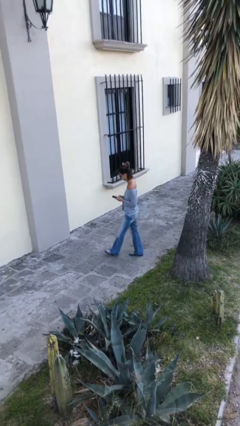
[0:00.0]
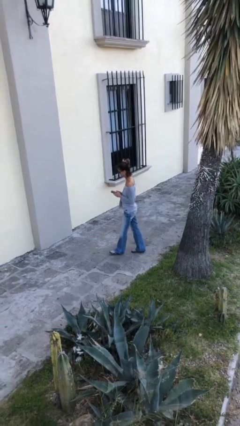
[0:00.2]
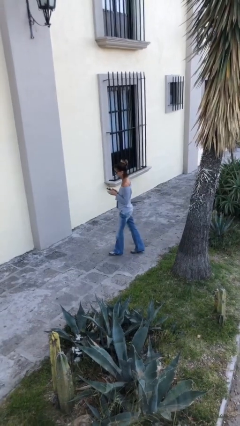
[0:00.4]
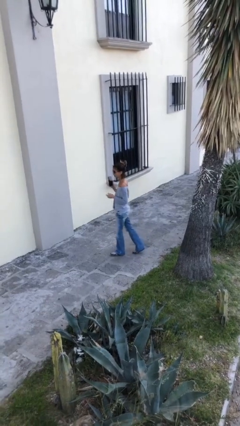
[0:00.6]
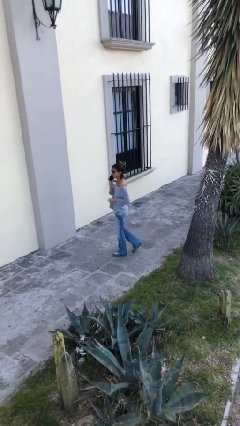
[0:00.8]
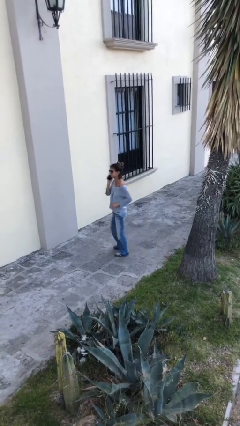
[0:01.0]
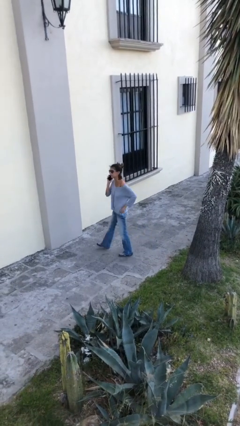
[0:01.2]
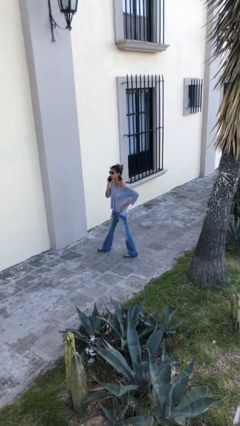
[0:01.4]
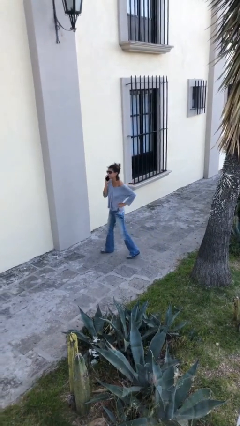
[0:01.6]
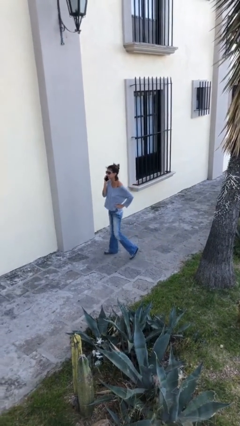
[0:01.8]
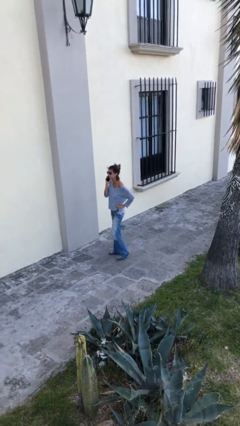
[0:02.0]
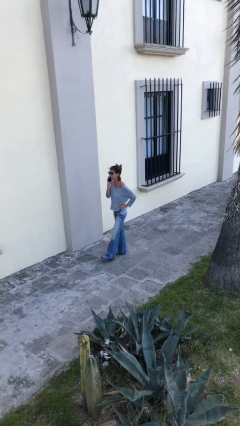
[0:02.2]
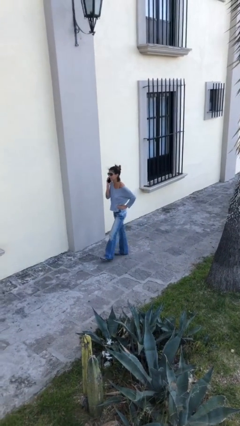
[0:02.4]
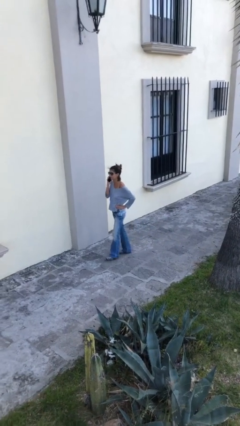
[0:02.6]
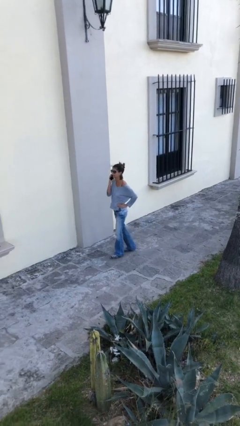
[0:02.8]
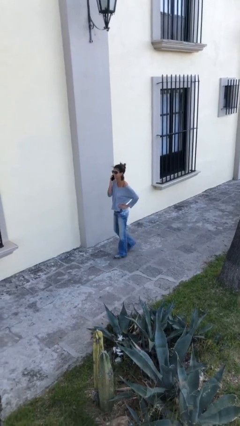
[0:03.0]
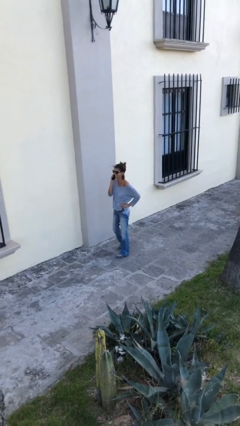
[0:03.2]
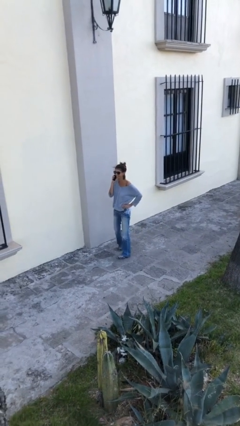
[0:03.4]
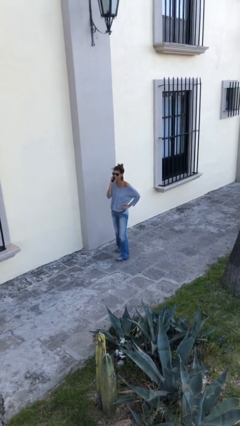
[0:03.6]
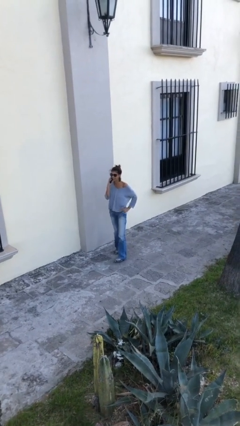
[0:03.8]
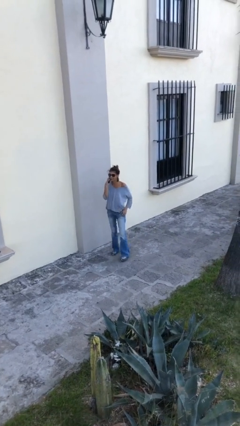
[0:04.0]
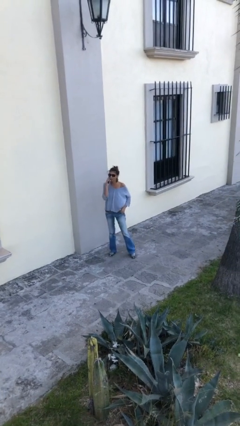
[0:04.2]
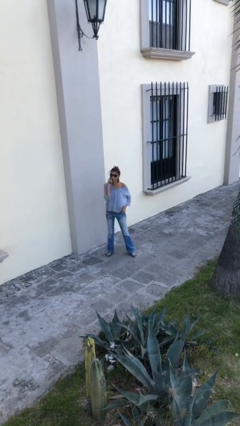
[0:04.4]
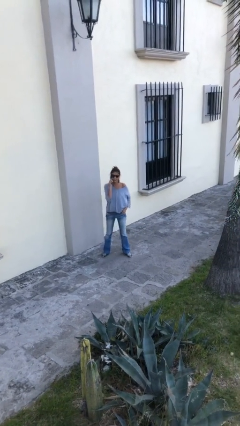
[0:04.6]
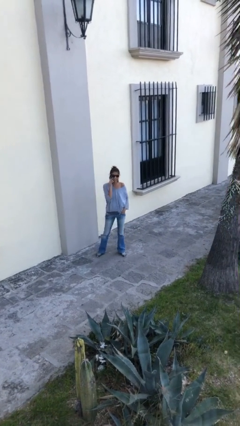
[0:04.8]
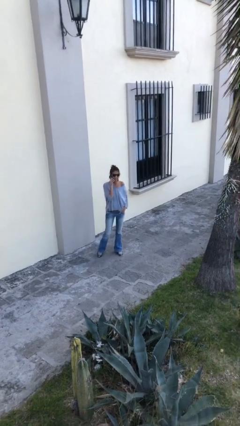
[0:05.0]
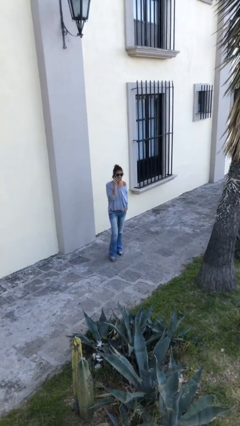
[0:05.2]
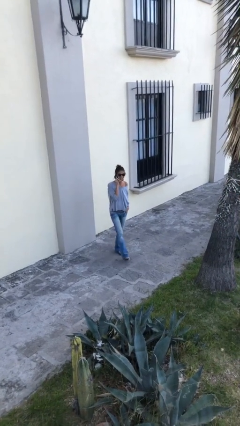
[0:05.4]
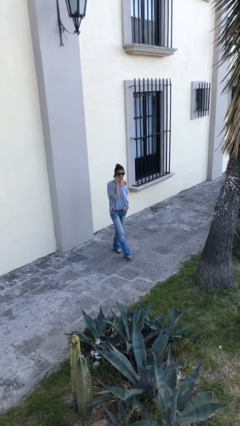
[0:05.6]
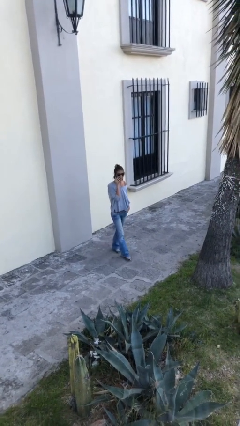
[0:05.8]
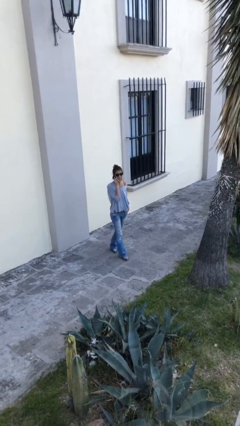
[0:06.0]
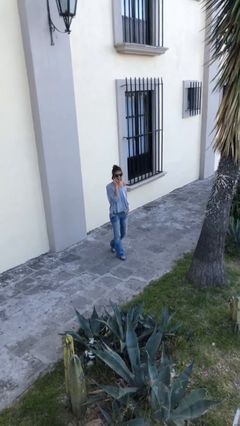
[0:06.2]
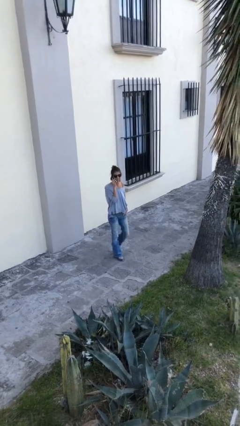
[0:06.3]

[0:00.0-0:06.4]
person talks on phone

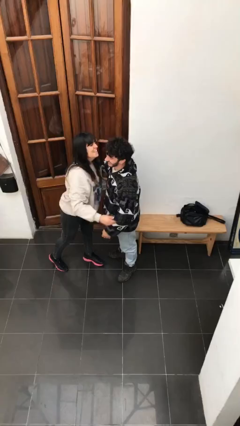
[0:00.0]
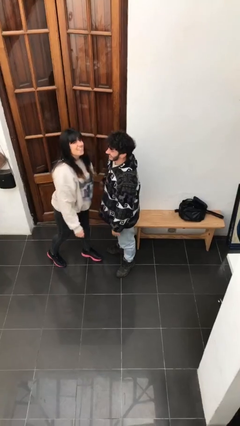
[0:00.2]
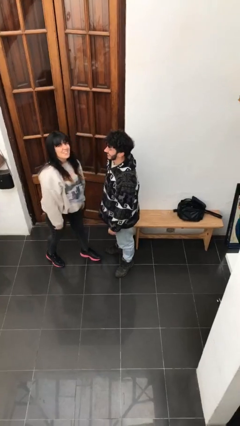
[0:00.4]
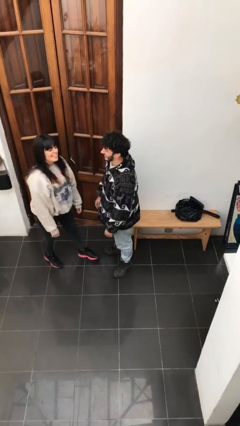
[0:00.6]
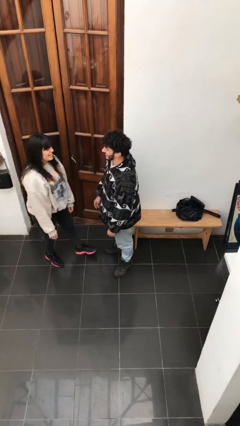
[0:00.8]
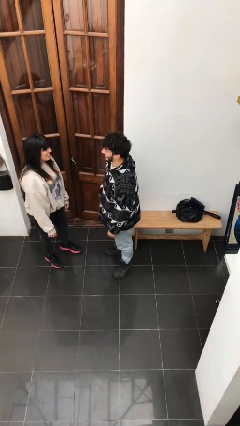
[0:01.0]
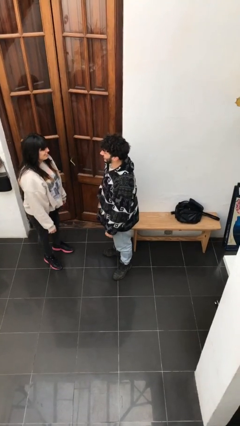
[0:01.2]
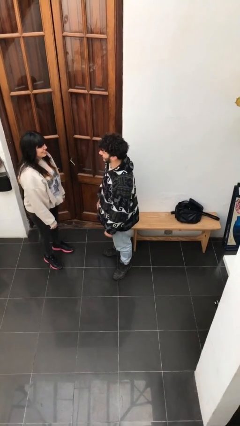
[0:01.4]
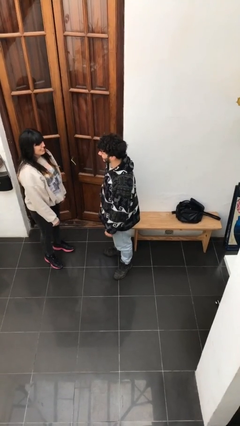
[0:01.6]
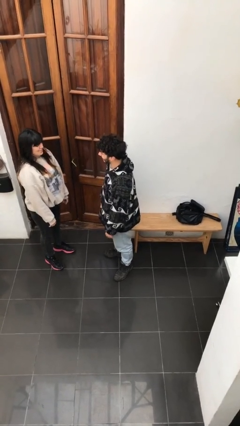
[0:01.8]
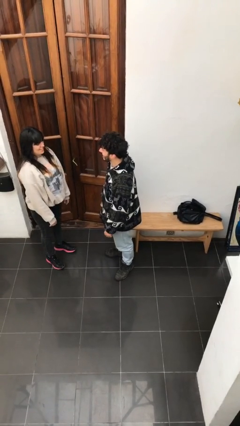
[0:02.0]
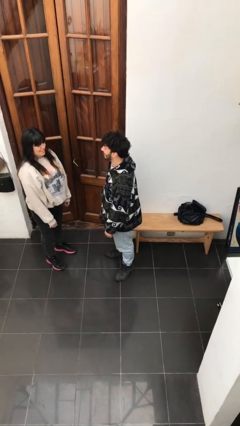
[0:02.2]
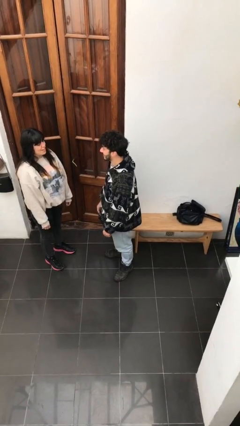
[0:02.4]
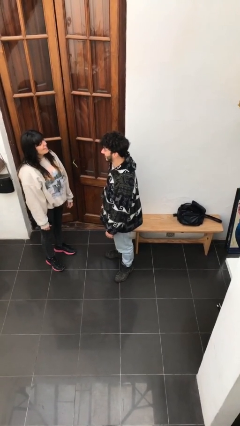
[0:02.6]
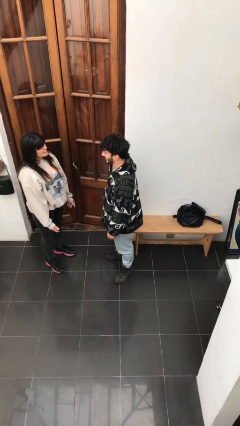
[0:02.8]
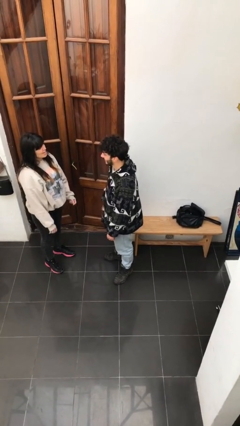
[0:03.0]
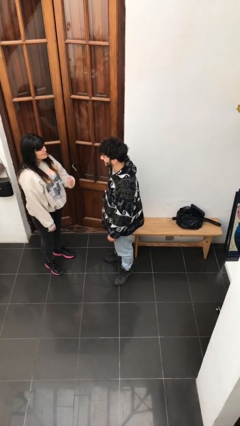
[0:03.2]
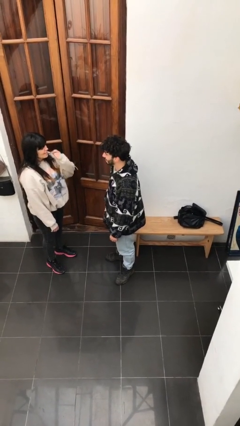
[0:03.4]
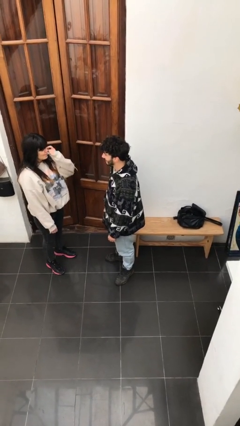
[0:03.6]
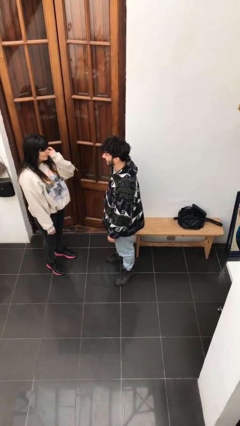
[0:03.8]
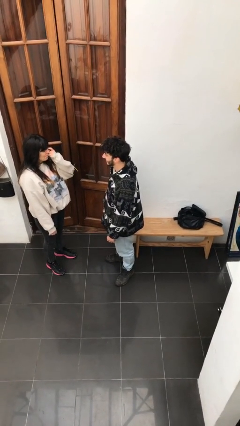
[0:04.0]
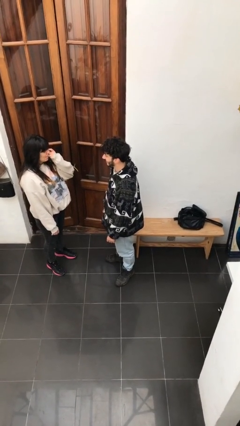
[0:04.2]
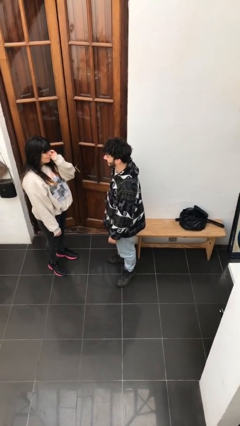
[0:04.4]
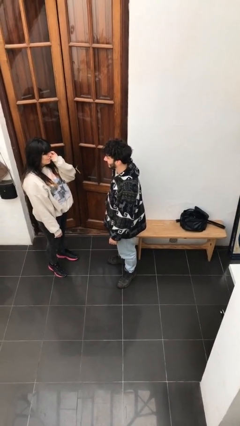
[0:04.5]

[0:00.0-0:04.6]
person talks to person

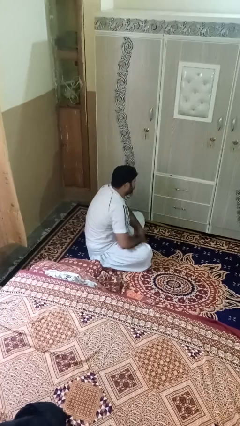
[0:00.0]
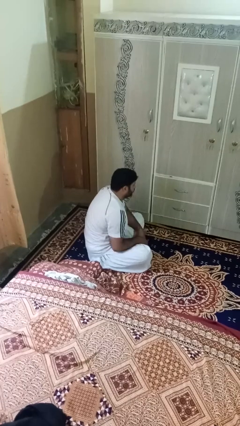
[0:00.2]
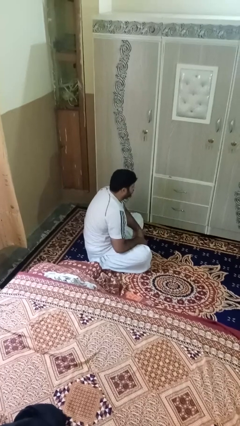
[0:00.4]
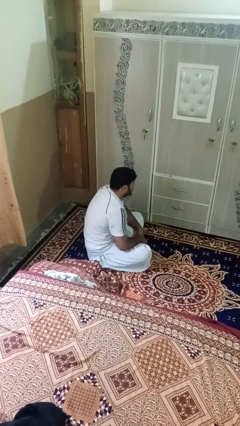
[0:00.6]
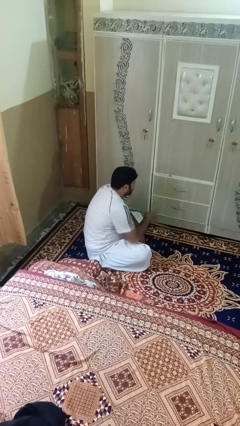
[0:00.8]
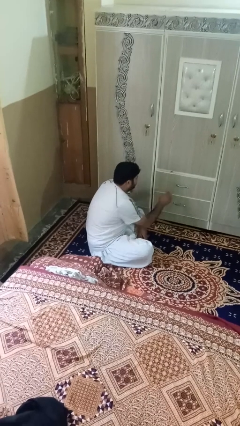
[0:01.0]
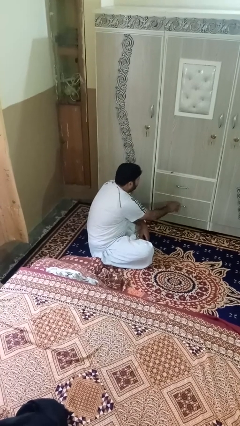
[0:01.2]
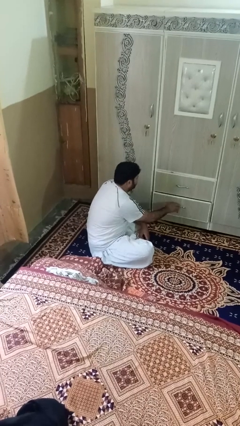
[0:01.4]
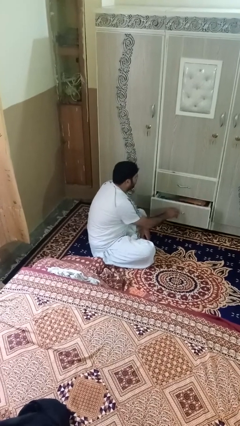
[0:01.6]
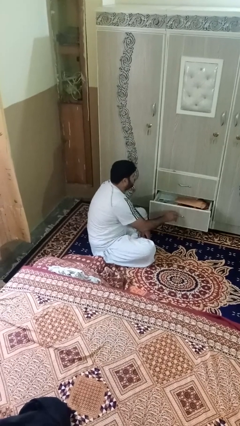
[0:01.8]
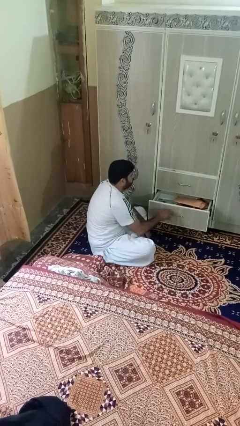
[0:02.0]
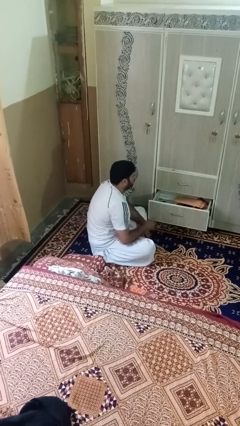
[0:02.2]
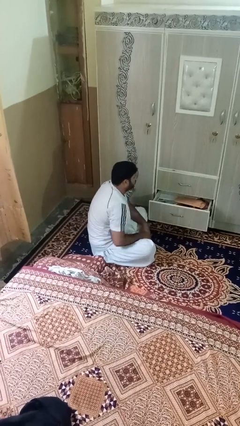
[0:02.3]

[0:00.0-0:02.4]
person opens dresser drawer

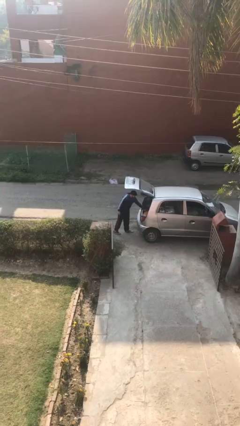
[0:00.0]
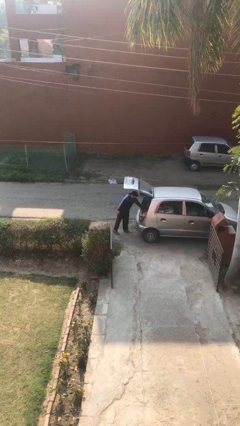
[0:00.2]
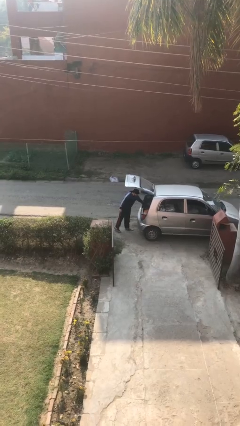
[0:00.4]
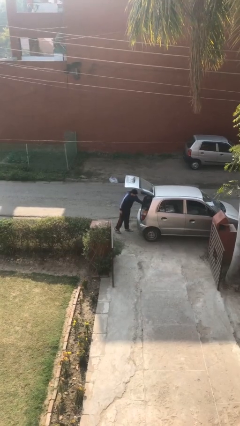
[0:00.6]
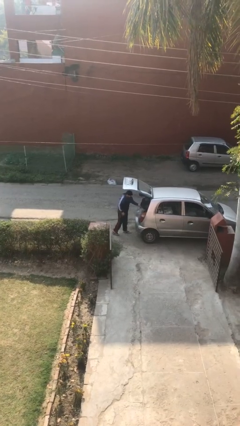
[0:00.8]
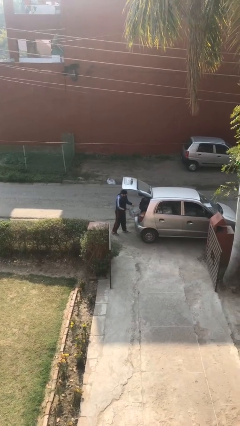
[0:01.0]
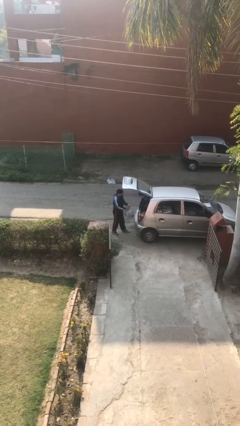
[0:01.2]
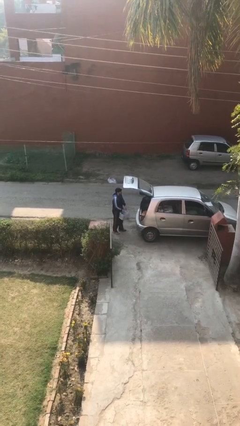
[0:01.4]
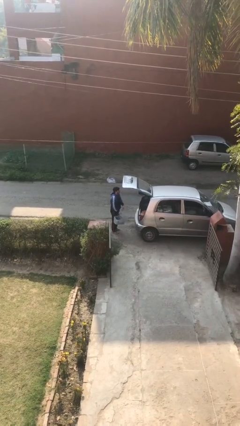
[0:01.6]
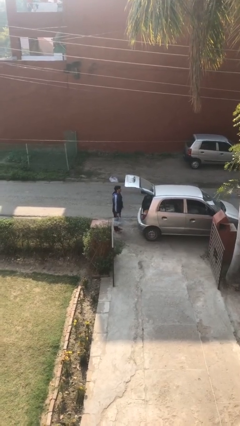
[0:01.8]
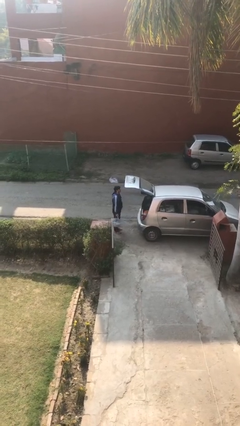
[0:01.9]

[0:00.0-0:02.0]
person unloads car

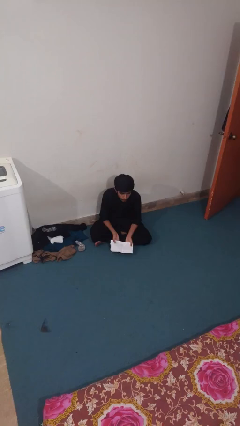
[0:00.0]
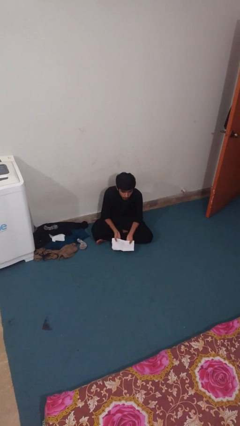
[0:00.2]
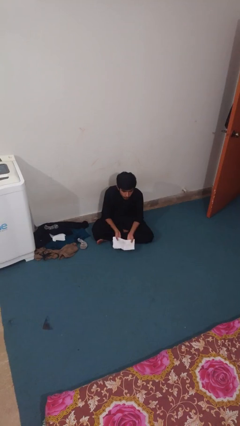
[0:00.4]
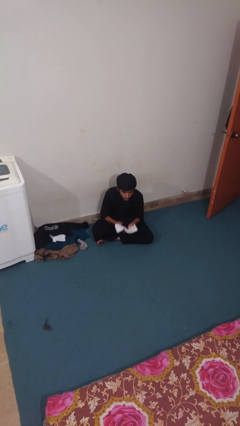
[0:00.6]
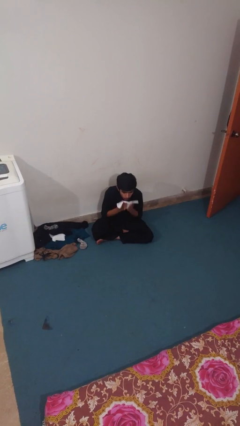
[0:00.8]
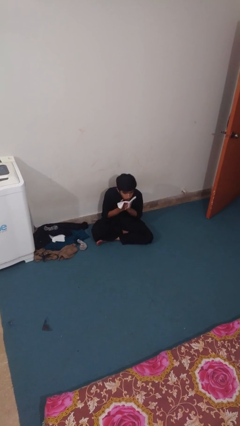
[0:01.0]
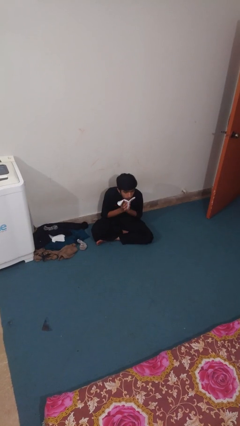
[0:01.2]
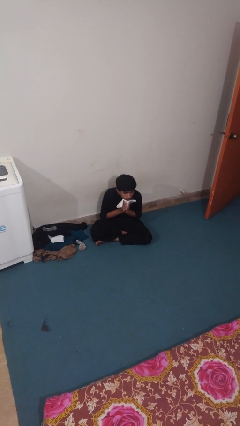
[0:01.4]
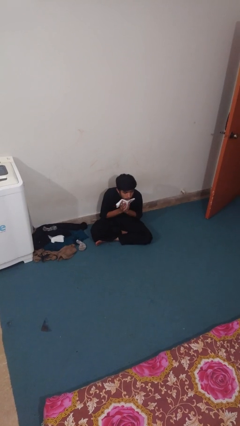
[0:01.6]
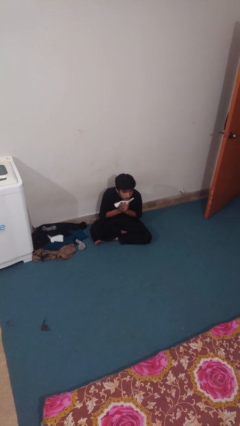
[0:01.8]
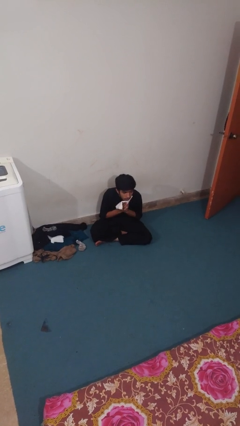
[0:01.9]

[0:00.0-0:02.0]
person wipes mouth with napkin

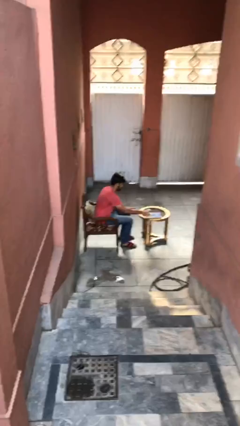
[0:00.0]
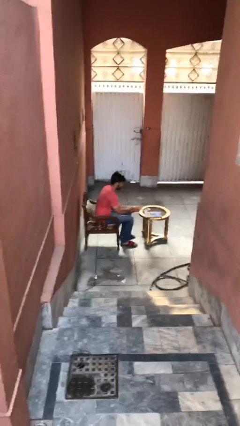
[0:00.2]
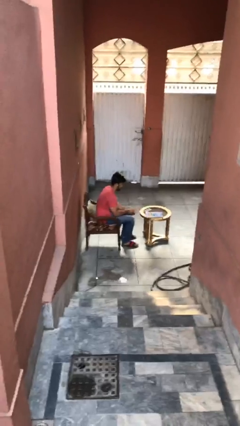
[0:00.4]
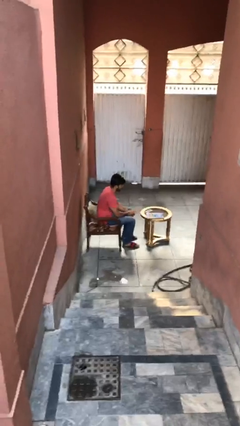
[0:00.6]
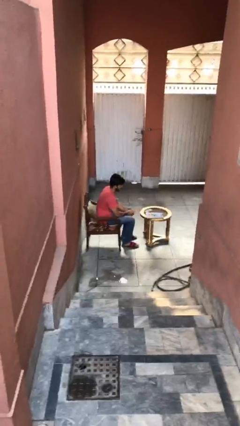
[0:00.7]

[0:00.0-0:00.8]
person puts down object on table
